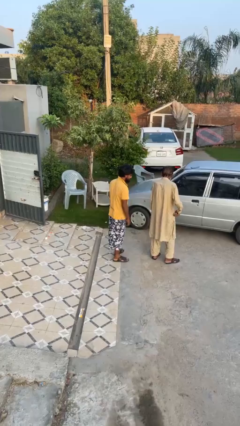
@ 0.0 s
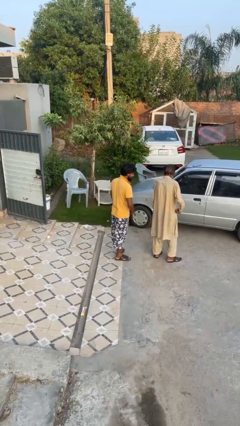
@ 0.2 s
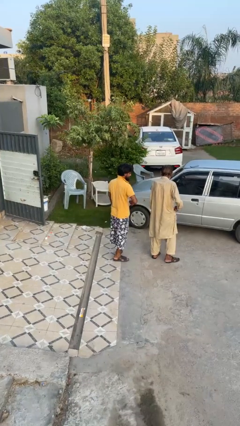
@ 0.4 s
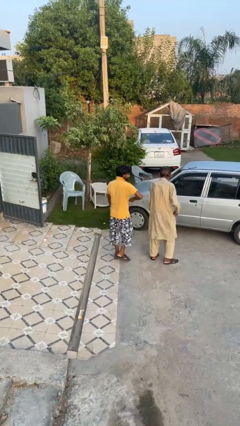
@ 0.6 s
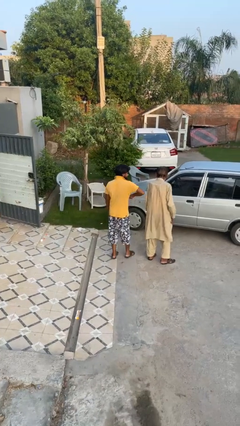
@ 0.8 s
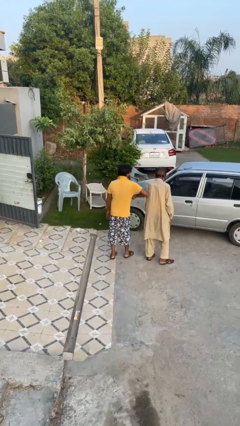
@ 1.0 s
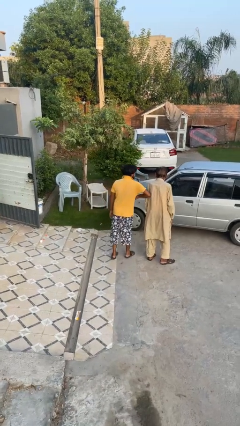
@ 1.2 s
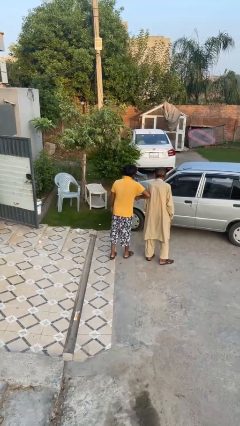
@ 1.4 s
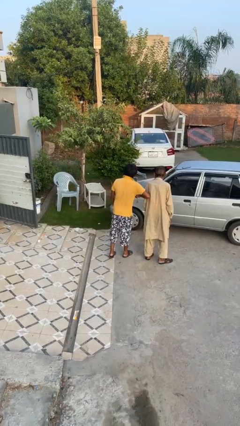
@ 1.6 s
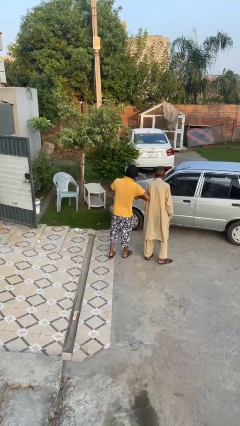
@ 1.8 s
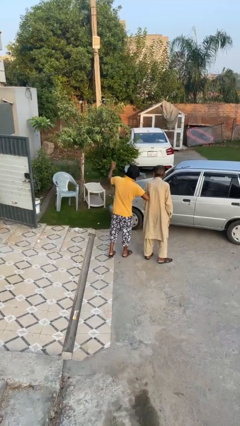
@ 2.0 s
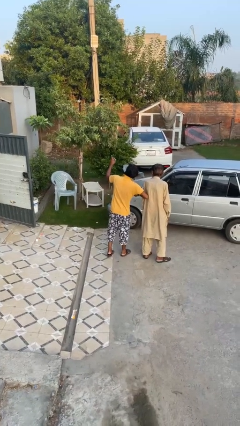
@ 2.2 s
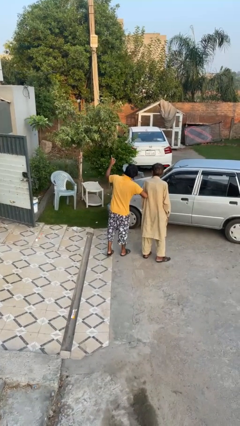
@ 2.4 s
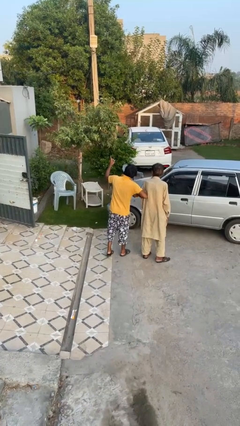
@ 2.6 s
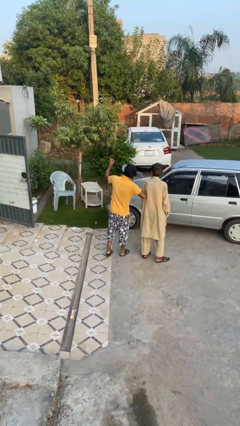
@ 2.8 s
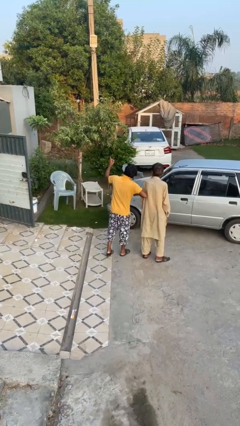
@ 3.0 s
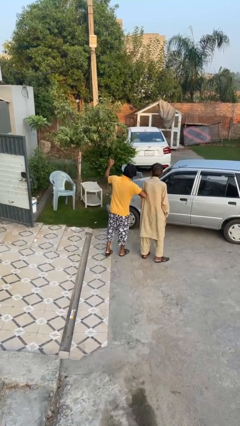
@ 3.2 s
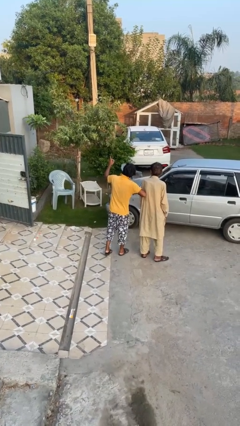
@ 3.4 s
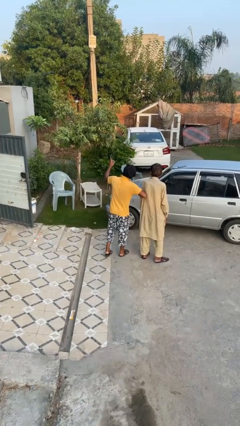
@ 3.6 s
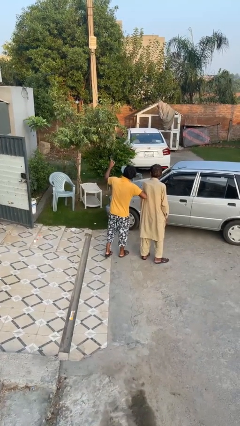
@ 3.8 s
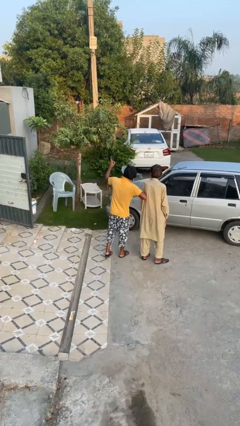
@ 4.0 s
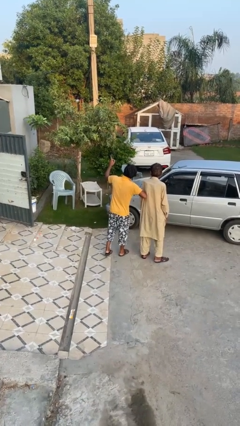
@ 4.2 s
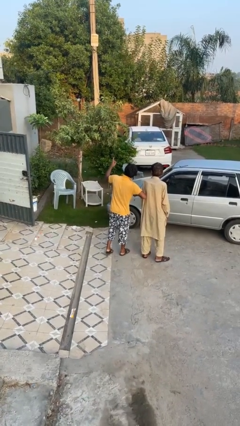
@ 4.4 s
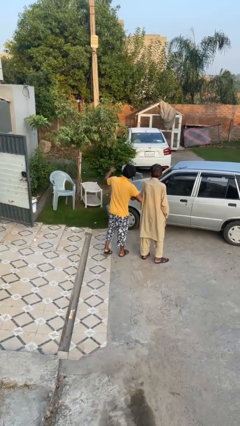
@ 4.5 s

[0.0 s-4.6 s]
person nudges person with elbow

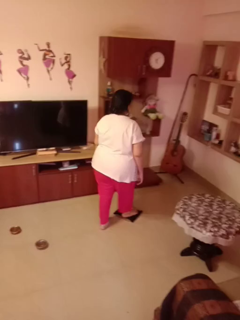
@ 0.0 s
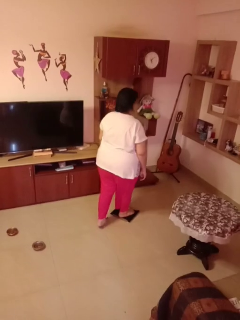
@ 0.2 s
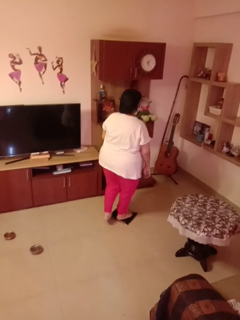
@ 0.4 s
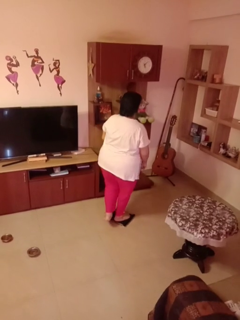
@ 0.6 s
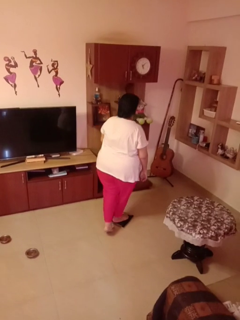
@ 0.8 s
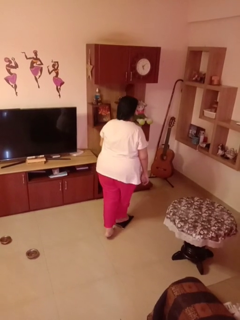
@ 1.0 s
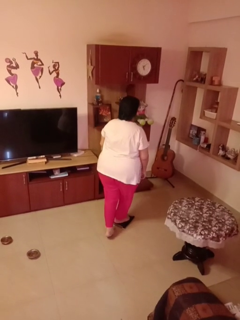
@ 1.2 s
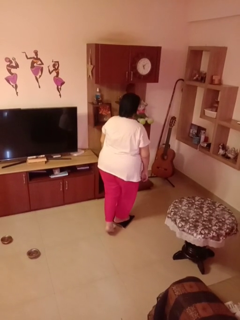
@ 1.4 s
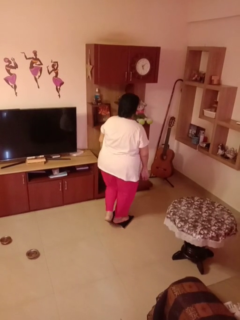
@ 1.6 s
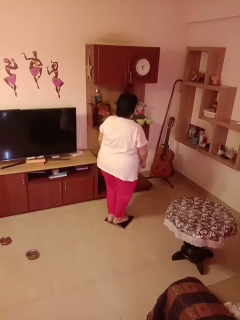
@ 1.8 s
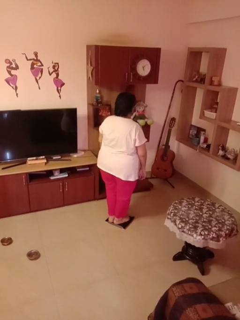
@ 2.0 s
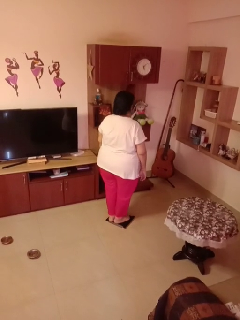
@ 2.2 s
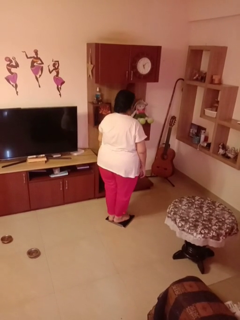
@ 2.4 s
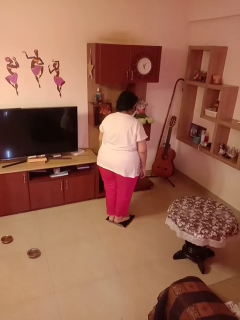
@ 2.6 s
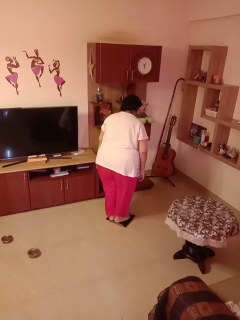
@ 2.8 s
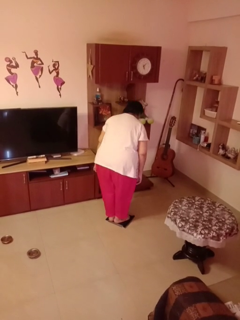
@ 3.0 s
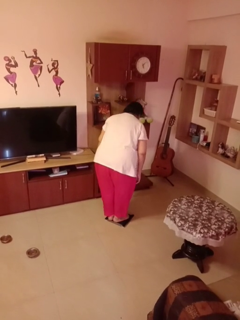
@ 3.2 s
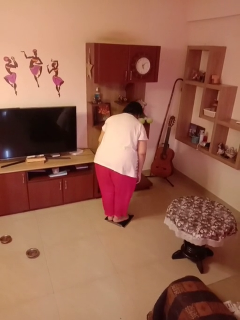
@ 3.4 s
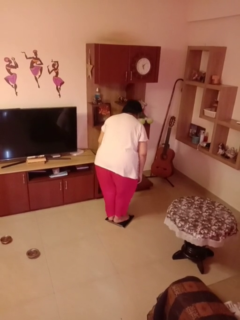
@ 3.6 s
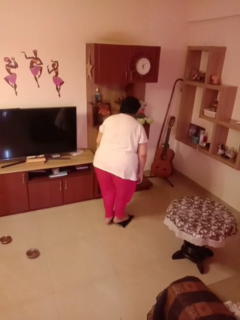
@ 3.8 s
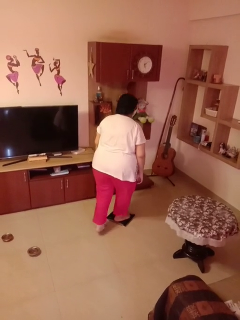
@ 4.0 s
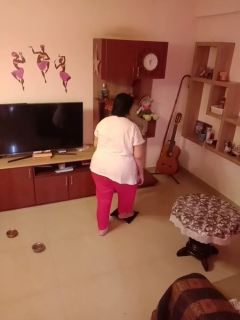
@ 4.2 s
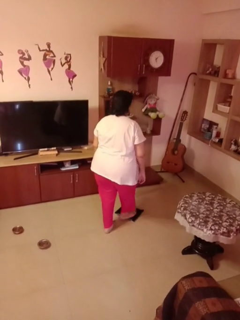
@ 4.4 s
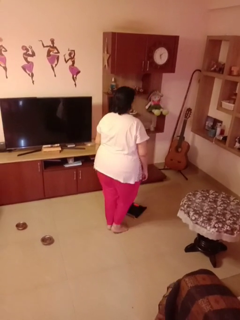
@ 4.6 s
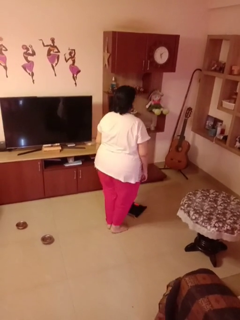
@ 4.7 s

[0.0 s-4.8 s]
person uses bodyweight scale

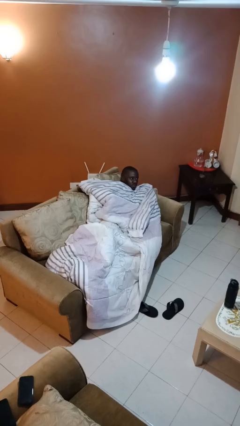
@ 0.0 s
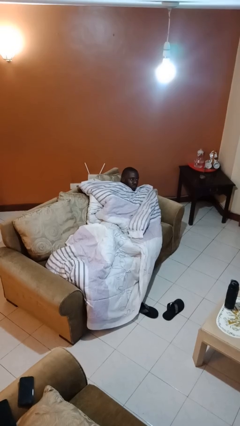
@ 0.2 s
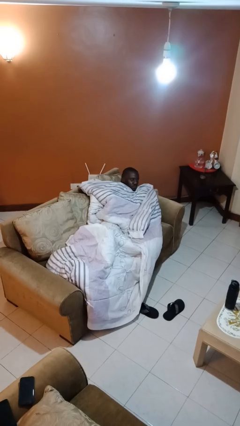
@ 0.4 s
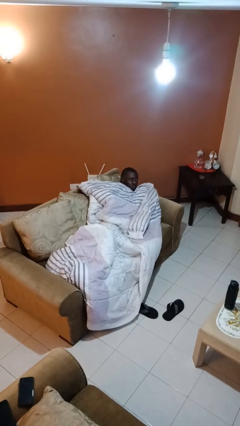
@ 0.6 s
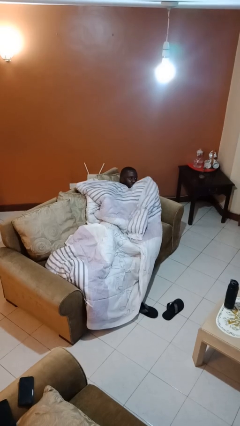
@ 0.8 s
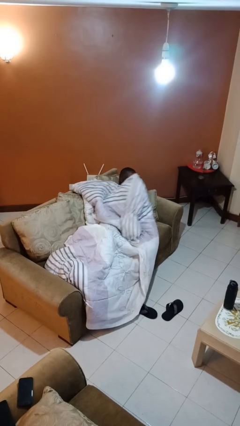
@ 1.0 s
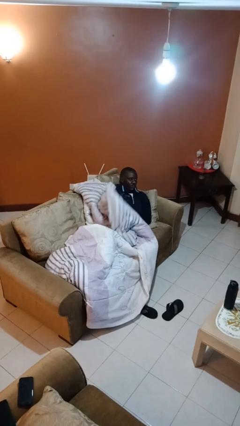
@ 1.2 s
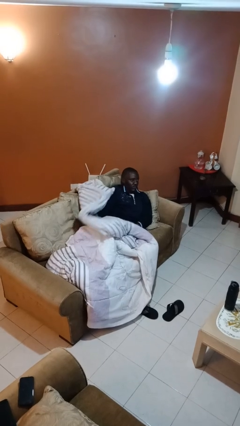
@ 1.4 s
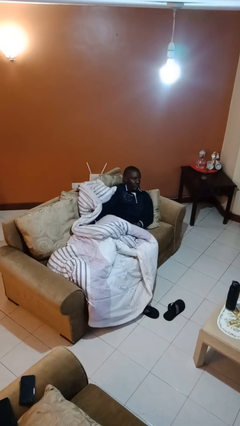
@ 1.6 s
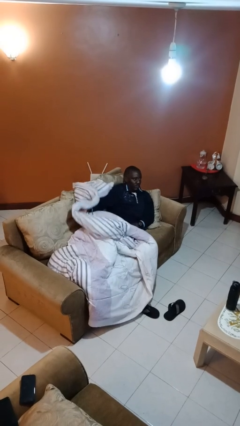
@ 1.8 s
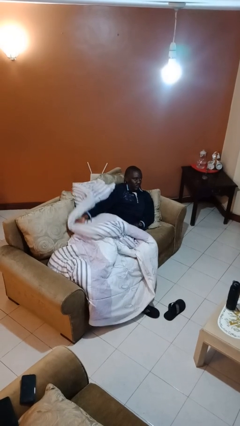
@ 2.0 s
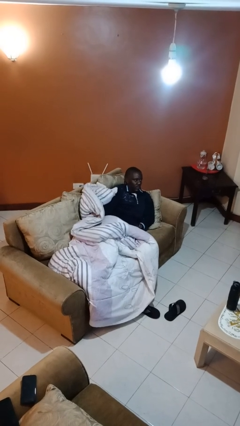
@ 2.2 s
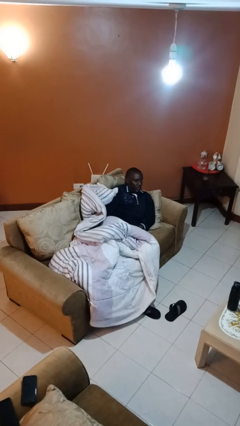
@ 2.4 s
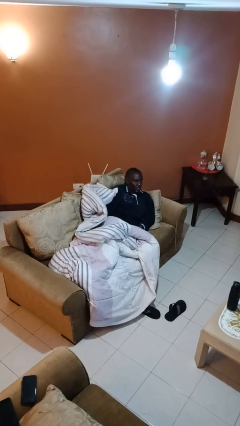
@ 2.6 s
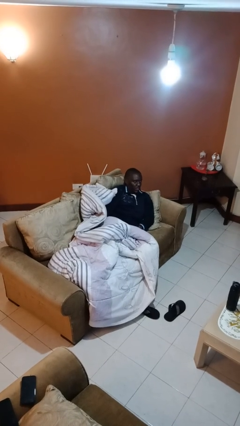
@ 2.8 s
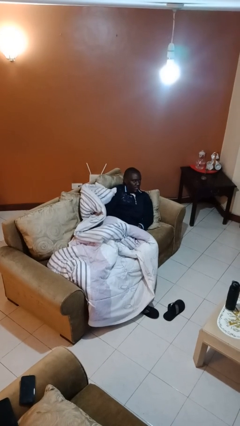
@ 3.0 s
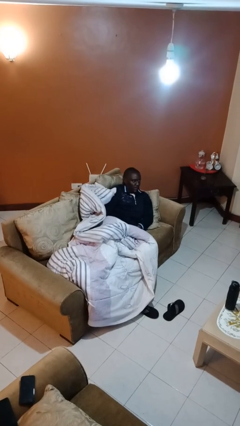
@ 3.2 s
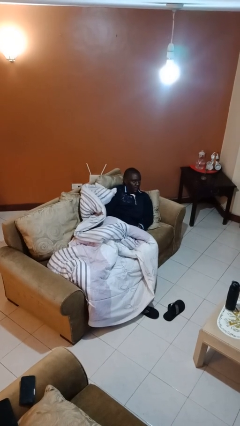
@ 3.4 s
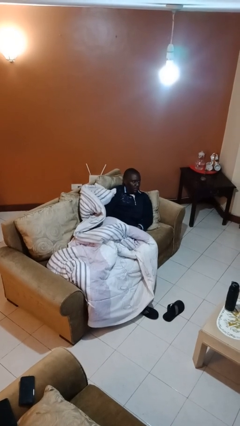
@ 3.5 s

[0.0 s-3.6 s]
person uncovers with blanket

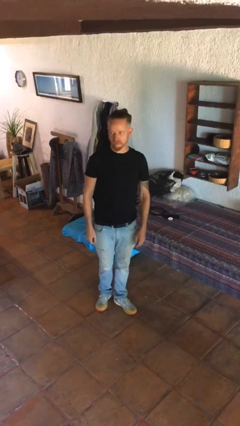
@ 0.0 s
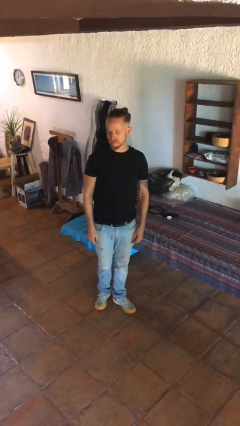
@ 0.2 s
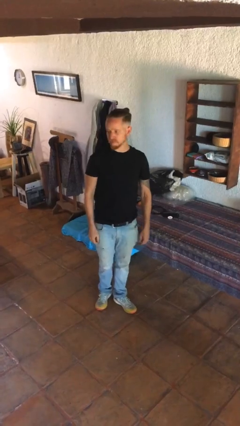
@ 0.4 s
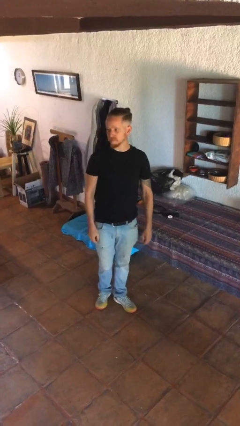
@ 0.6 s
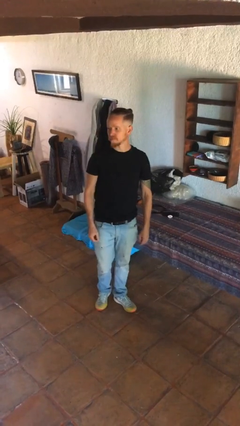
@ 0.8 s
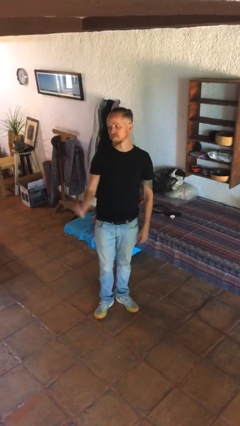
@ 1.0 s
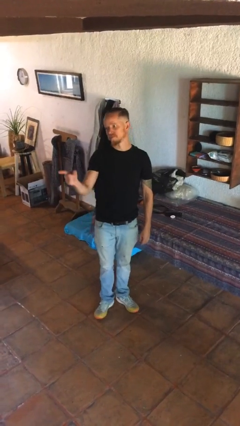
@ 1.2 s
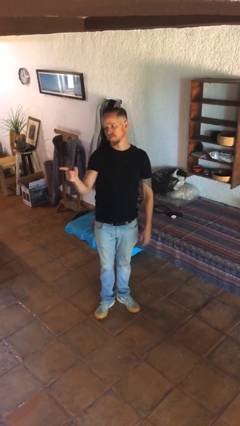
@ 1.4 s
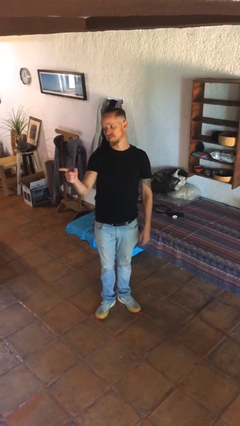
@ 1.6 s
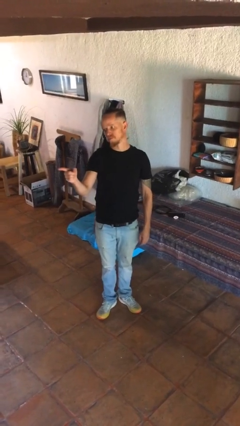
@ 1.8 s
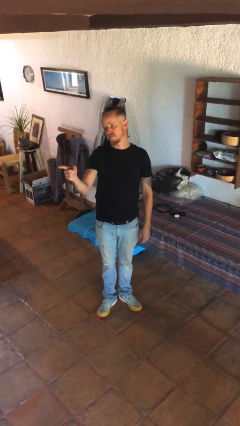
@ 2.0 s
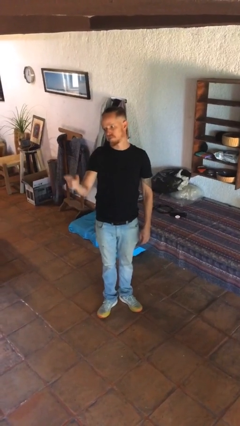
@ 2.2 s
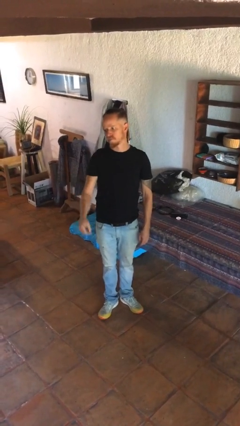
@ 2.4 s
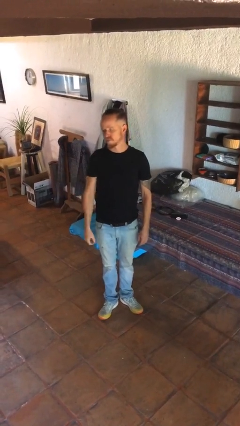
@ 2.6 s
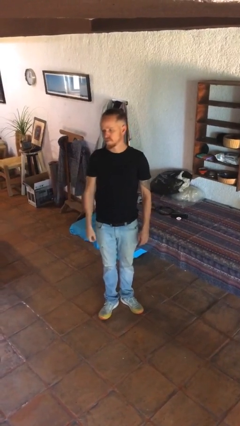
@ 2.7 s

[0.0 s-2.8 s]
person points at person

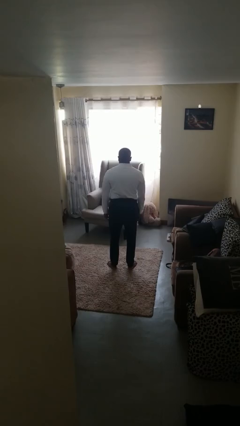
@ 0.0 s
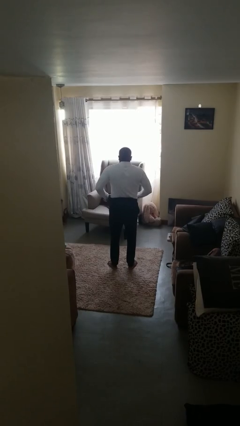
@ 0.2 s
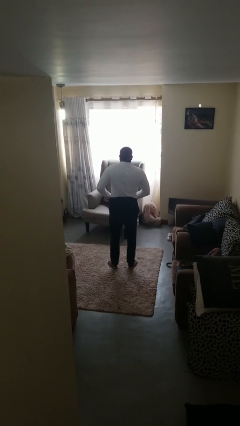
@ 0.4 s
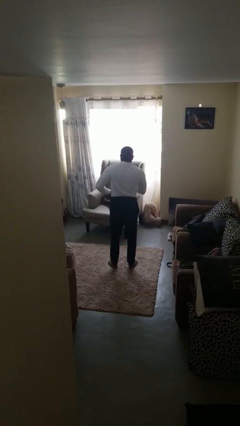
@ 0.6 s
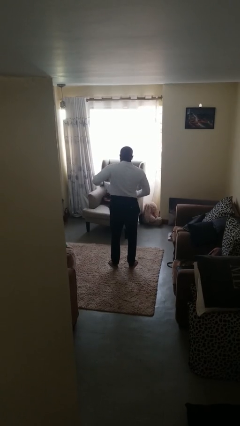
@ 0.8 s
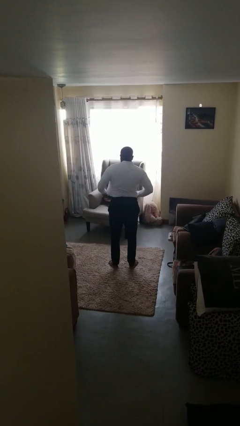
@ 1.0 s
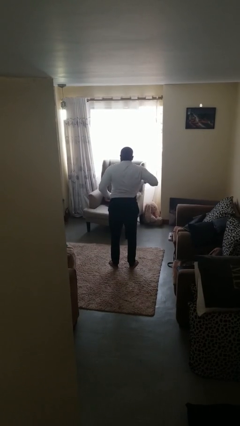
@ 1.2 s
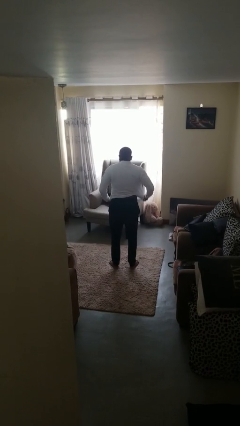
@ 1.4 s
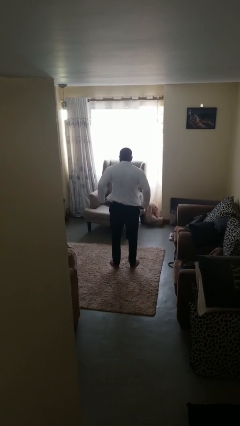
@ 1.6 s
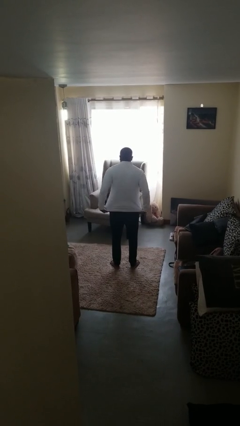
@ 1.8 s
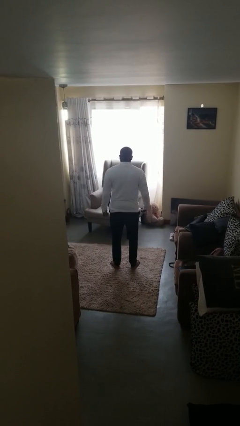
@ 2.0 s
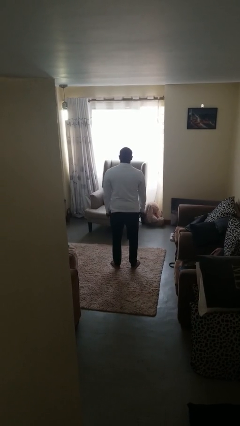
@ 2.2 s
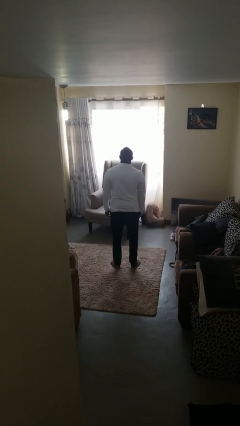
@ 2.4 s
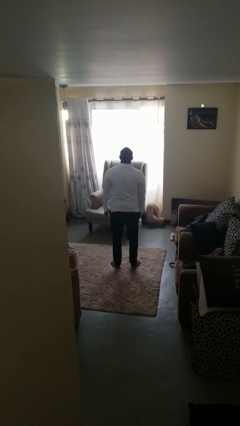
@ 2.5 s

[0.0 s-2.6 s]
person untucks shirt
